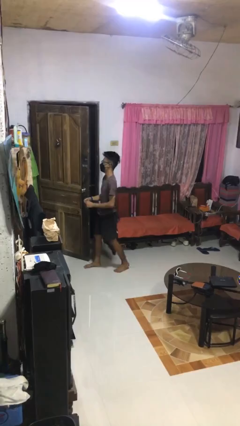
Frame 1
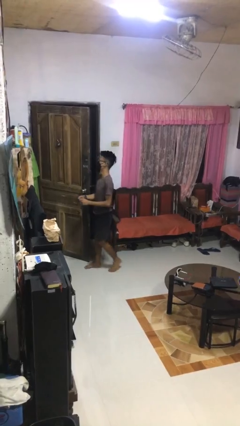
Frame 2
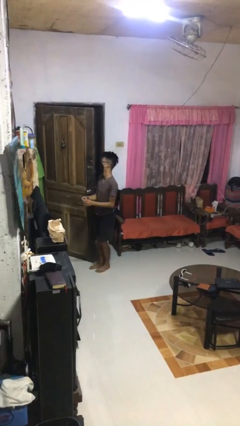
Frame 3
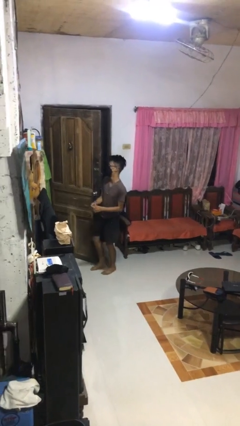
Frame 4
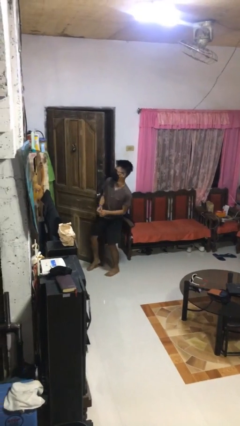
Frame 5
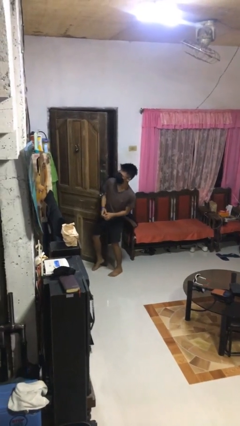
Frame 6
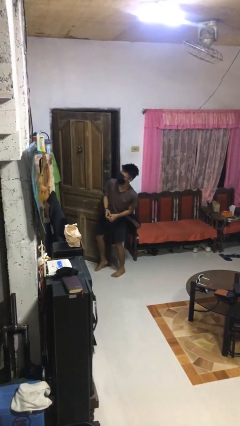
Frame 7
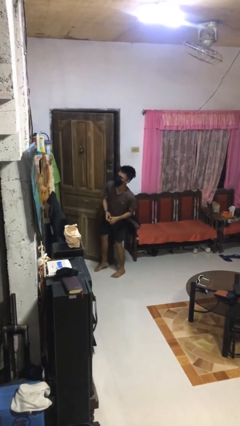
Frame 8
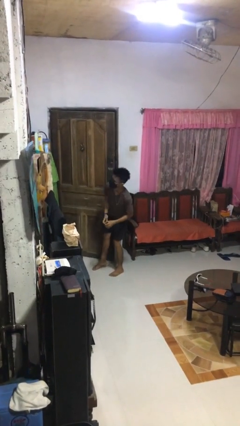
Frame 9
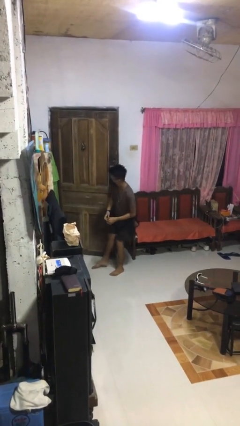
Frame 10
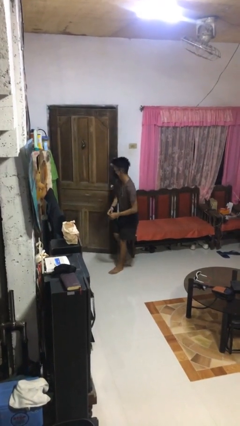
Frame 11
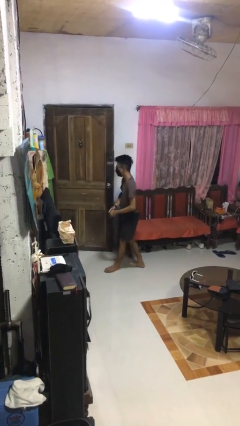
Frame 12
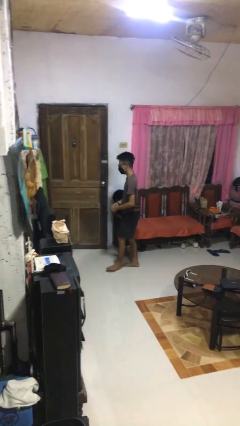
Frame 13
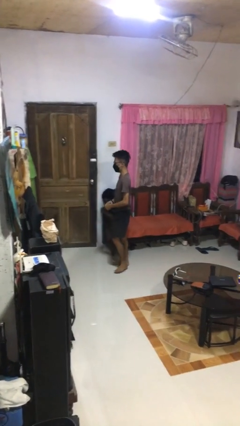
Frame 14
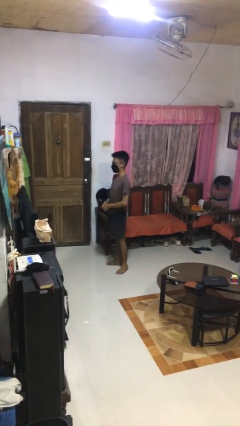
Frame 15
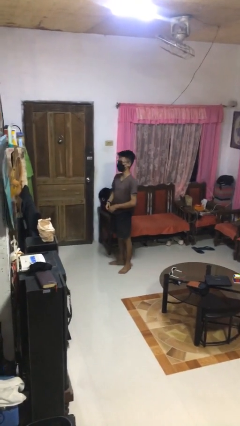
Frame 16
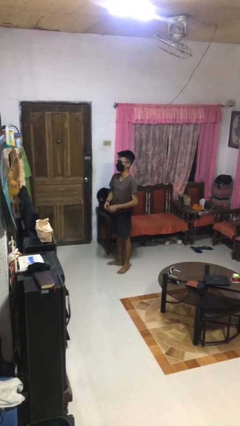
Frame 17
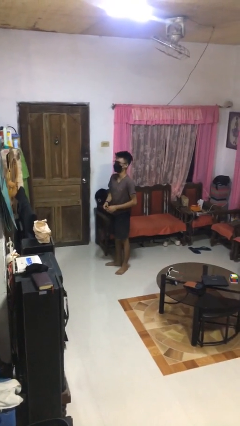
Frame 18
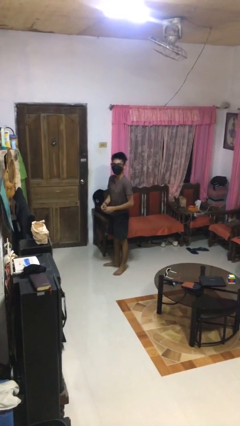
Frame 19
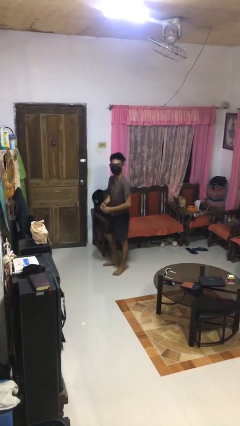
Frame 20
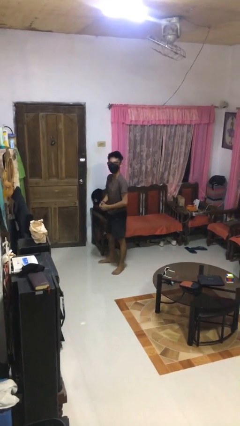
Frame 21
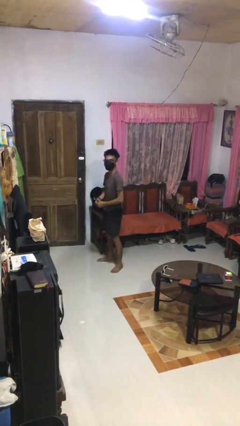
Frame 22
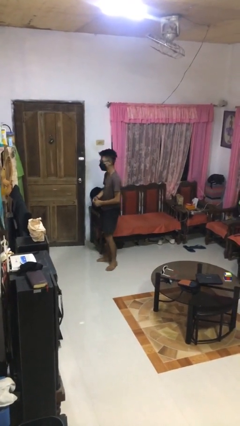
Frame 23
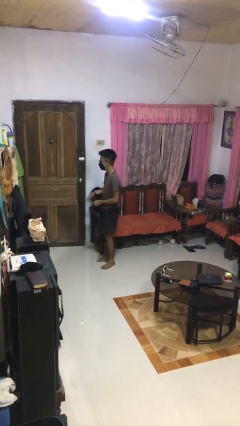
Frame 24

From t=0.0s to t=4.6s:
person closes door with hip

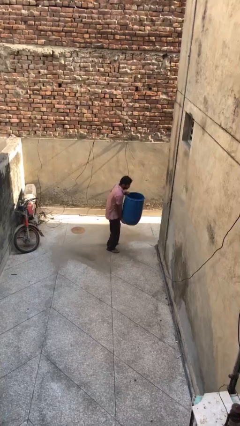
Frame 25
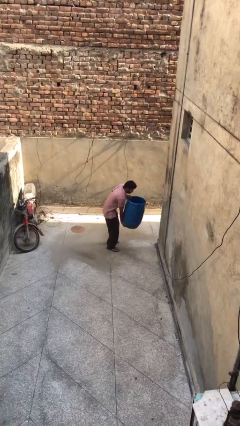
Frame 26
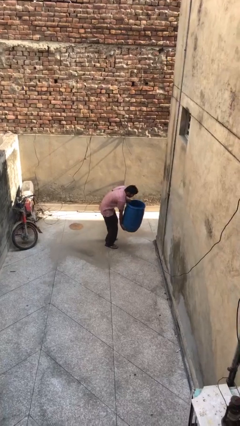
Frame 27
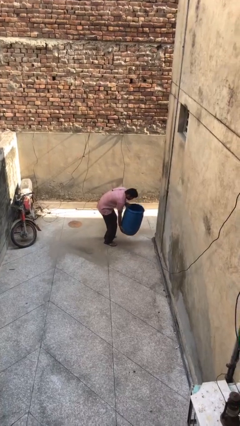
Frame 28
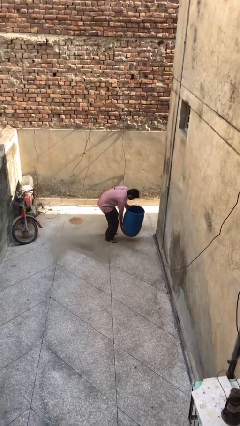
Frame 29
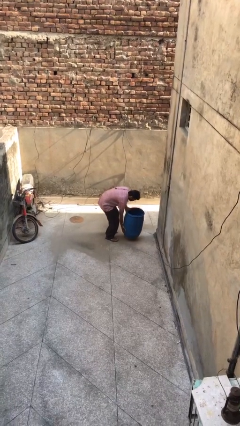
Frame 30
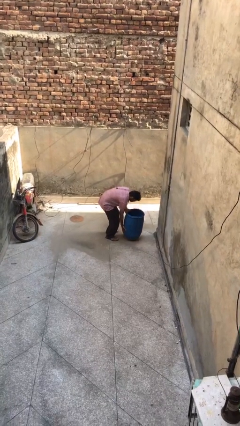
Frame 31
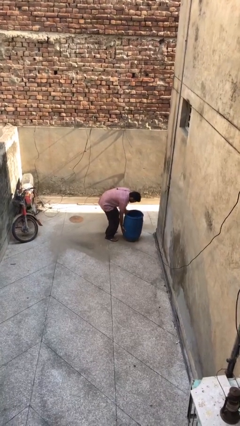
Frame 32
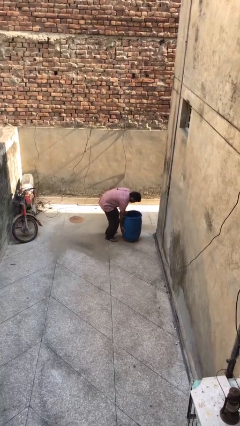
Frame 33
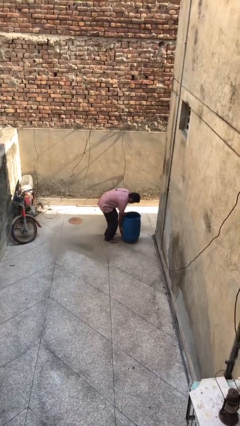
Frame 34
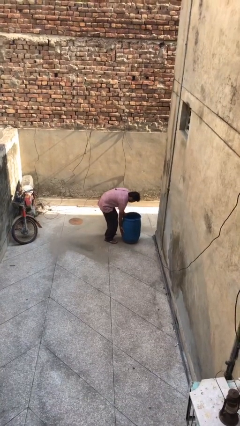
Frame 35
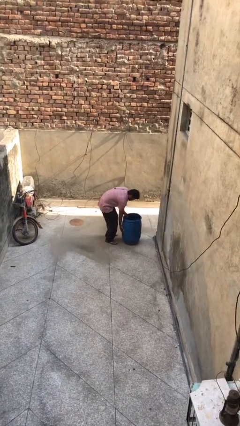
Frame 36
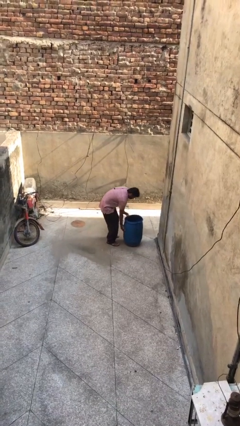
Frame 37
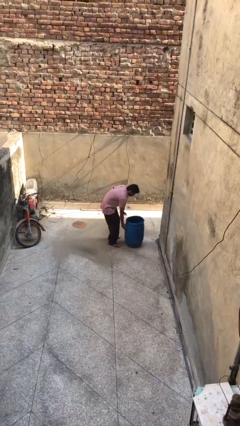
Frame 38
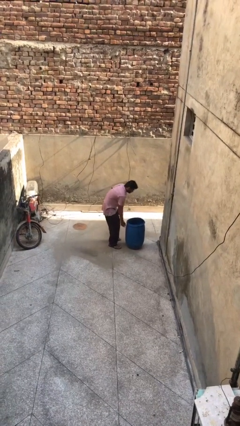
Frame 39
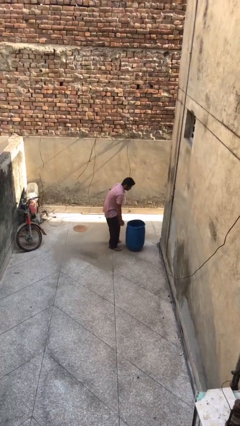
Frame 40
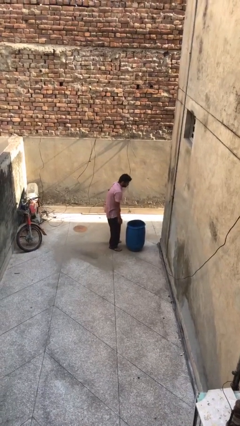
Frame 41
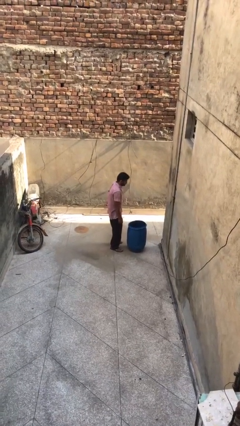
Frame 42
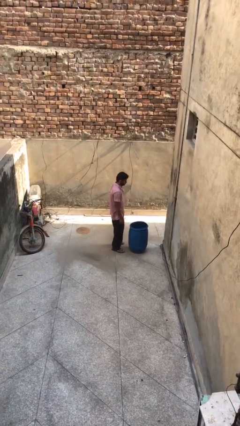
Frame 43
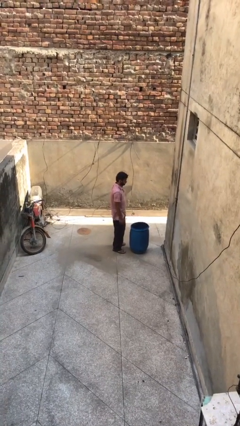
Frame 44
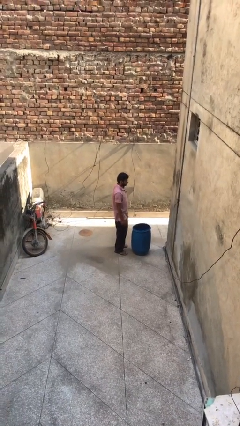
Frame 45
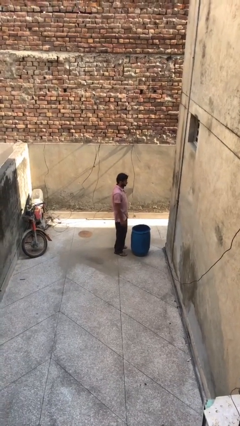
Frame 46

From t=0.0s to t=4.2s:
person puts down object on floor

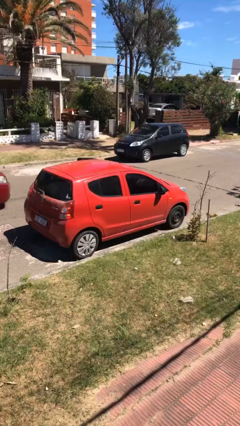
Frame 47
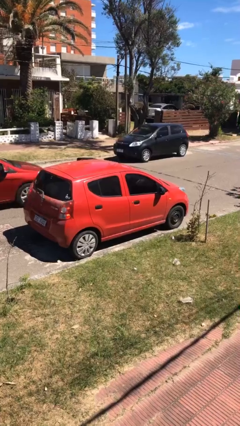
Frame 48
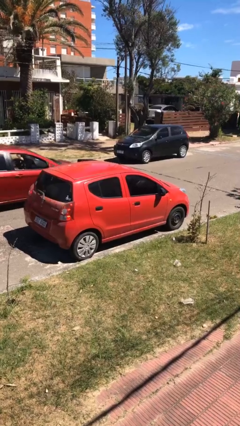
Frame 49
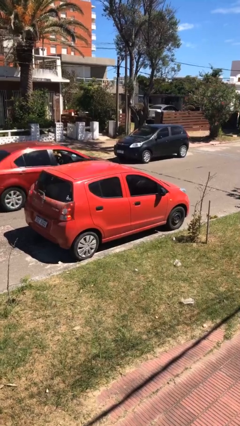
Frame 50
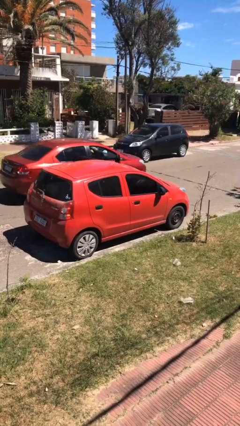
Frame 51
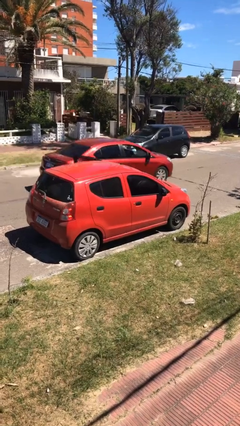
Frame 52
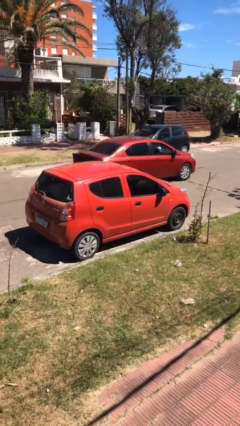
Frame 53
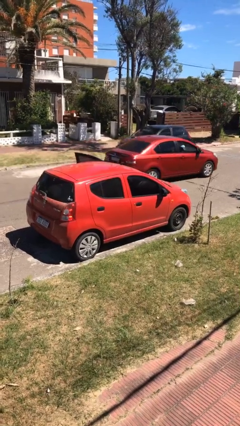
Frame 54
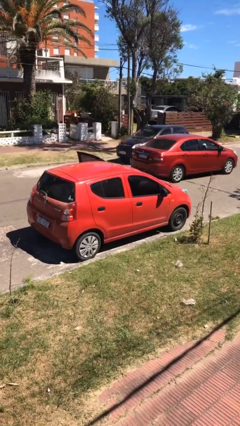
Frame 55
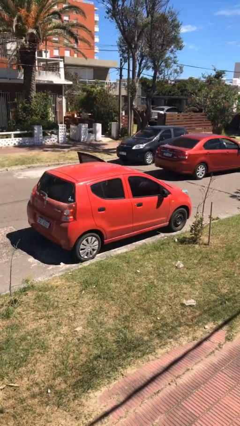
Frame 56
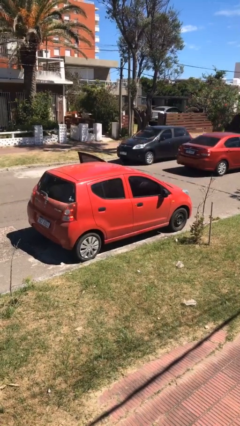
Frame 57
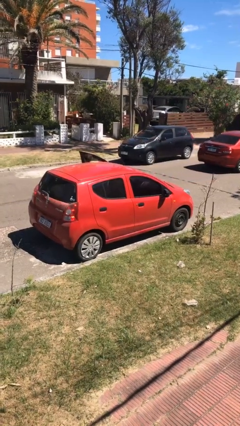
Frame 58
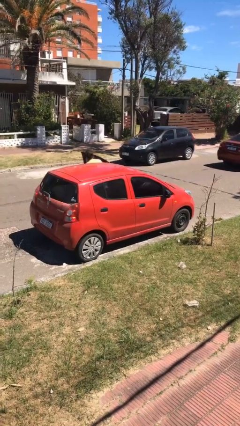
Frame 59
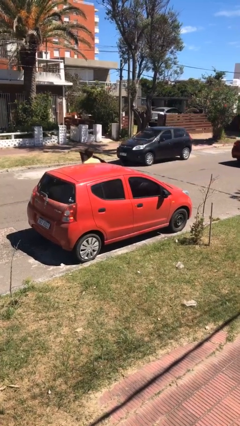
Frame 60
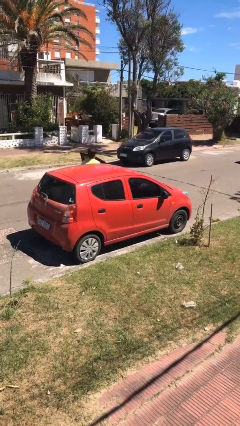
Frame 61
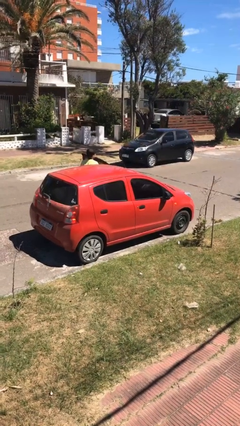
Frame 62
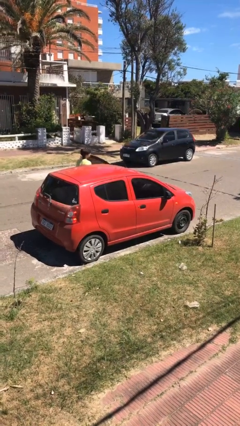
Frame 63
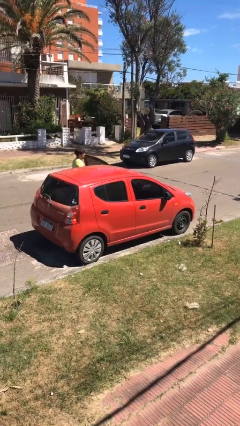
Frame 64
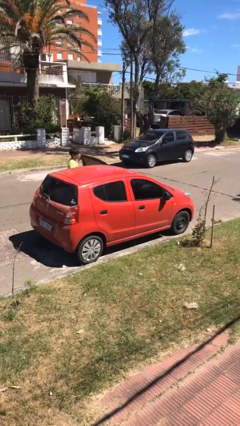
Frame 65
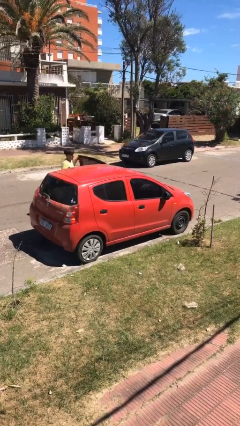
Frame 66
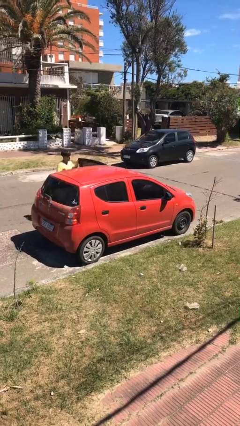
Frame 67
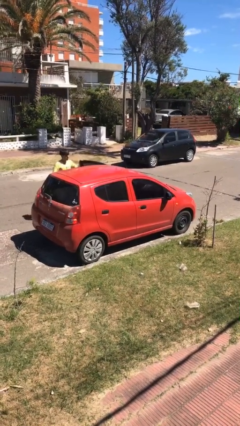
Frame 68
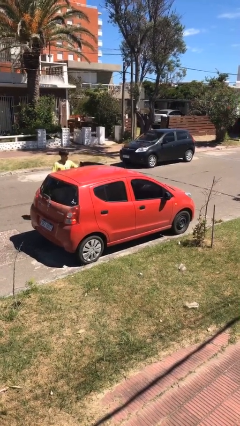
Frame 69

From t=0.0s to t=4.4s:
car drops off person

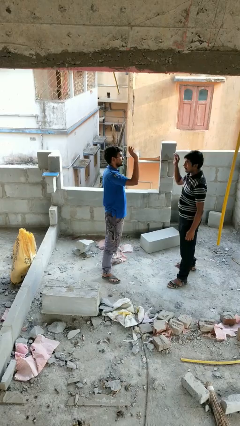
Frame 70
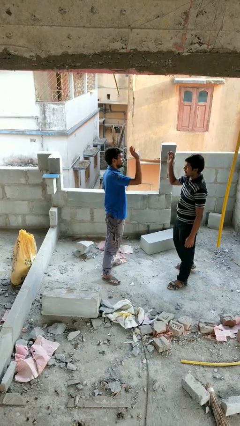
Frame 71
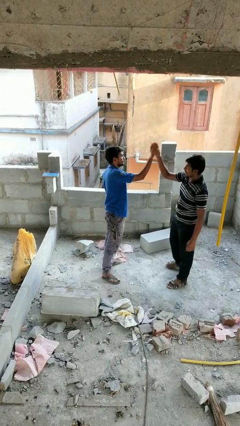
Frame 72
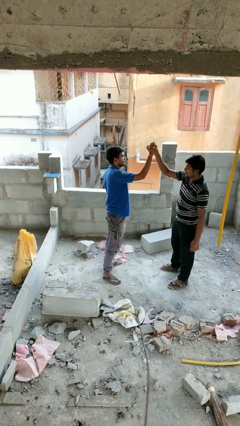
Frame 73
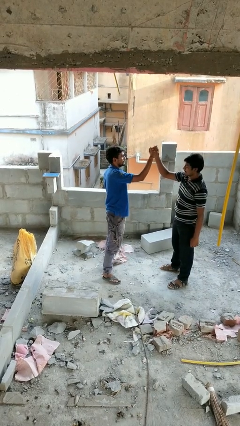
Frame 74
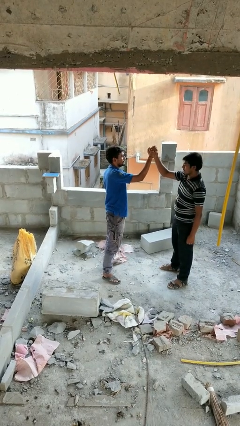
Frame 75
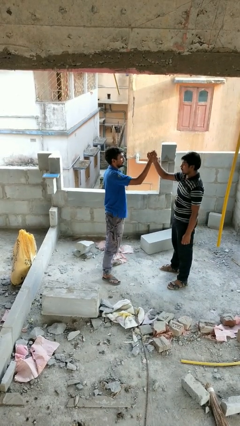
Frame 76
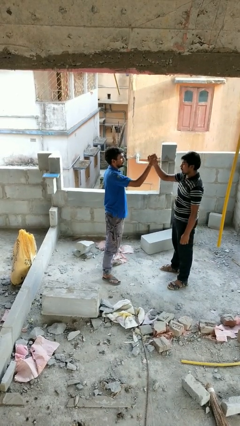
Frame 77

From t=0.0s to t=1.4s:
person highfives hand

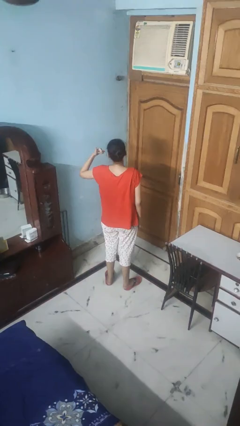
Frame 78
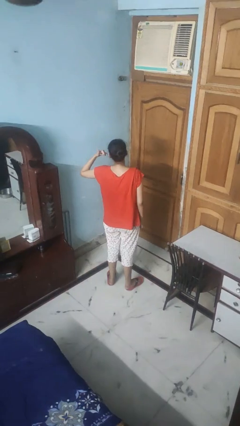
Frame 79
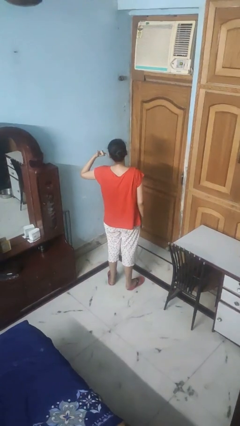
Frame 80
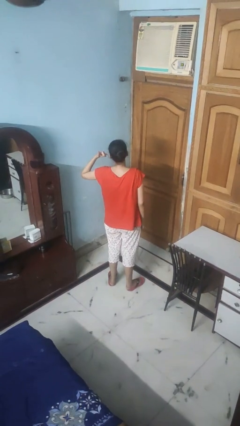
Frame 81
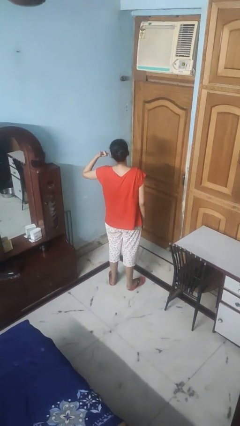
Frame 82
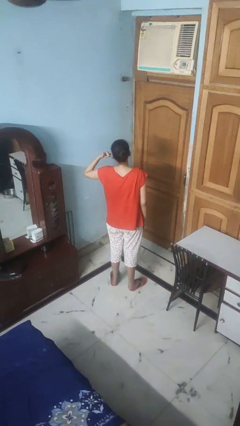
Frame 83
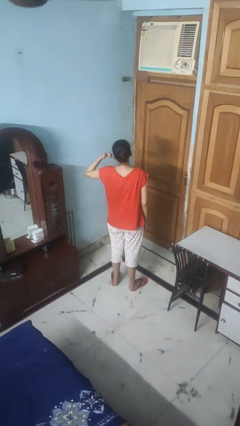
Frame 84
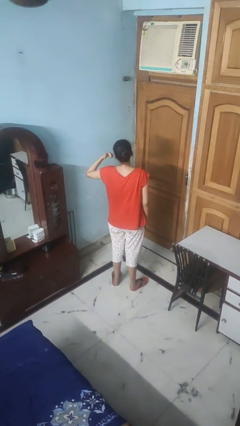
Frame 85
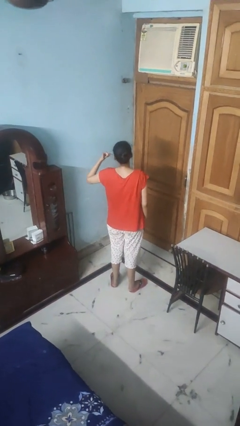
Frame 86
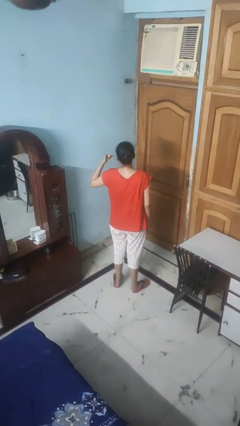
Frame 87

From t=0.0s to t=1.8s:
person gestures call me

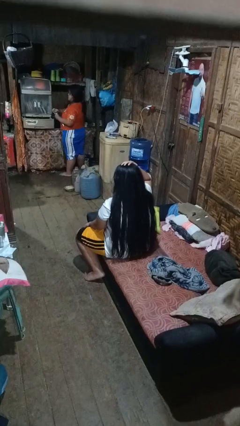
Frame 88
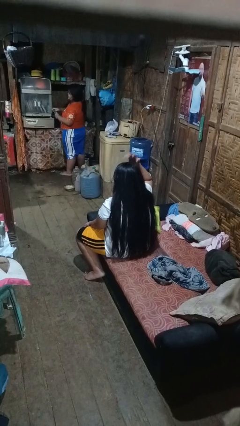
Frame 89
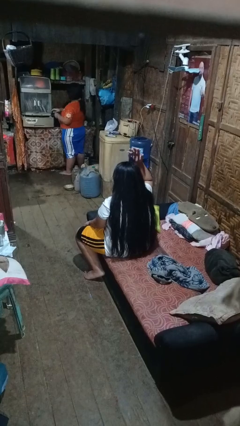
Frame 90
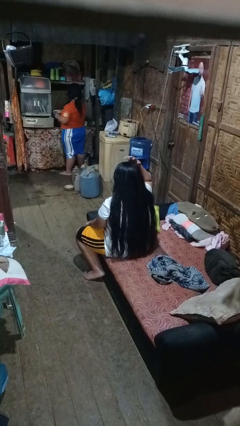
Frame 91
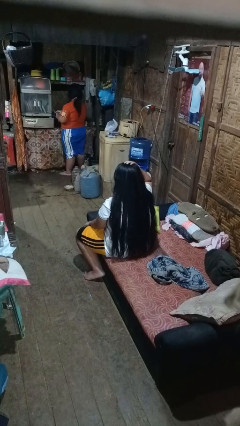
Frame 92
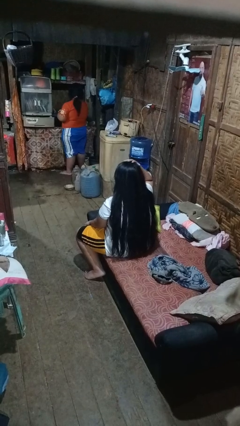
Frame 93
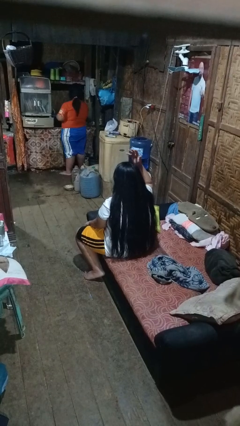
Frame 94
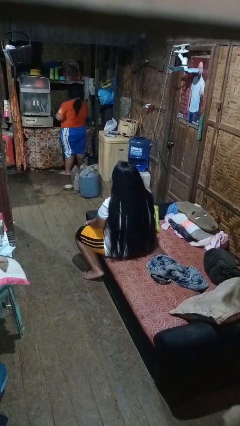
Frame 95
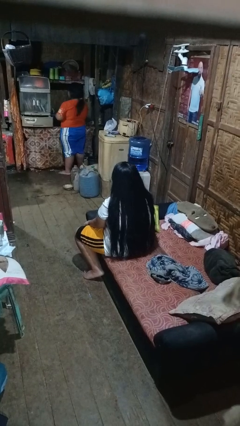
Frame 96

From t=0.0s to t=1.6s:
person pats head
